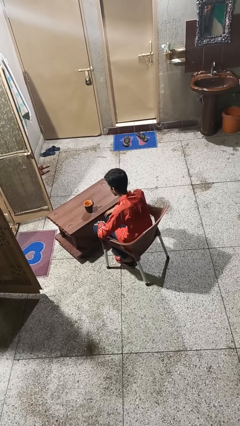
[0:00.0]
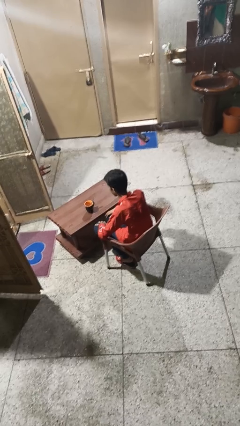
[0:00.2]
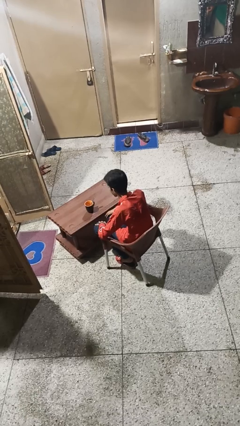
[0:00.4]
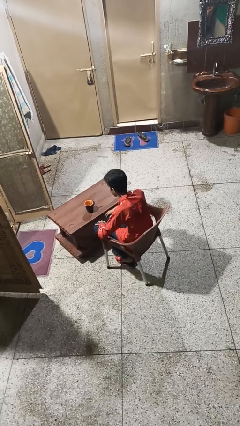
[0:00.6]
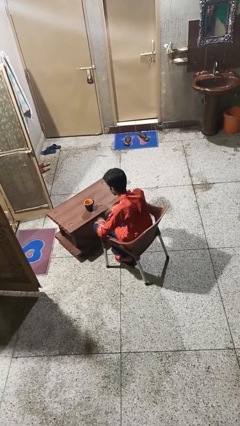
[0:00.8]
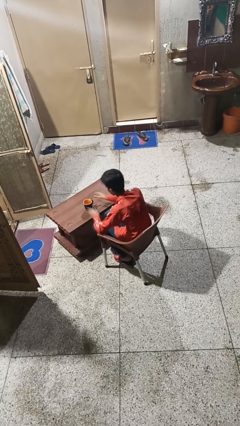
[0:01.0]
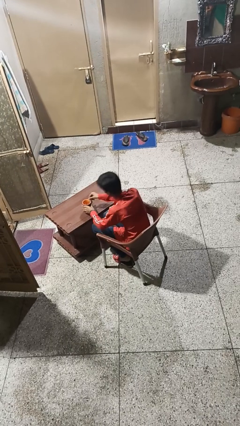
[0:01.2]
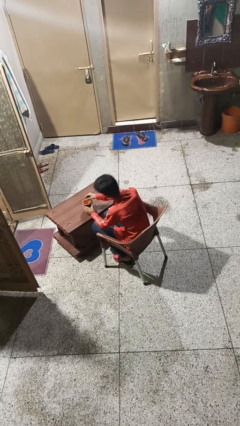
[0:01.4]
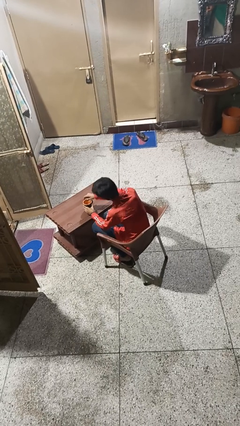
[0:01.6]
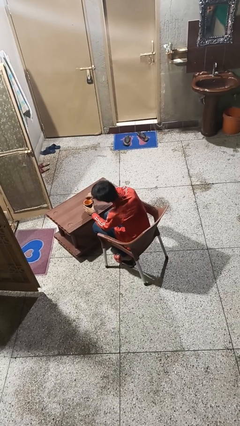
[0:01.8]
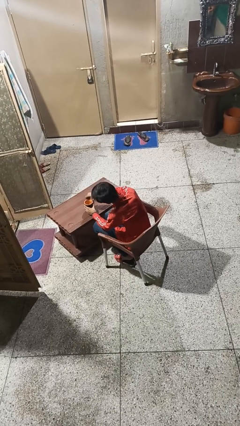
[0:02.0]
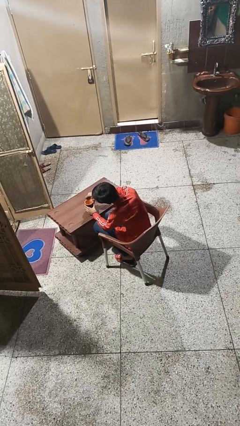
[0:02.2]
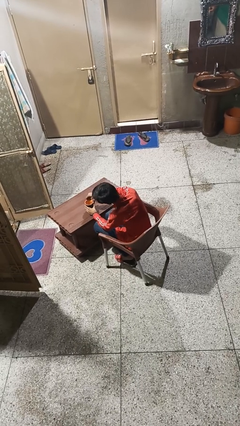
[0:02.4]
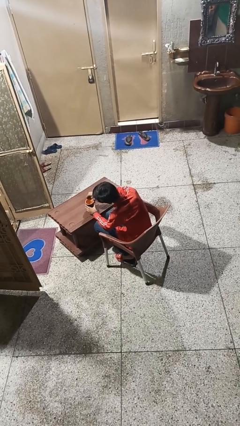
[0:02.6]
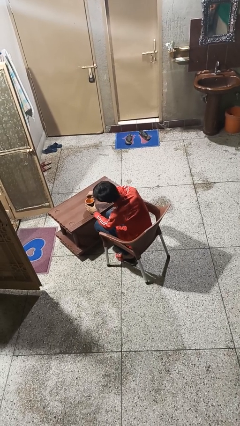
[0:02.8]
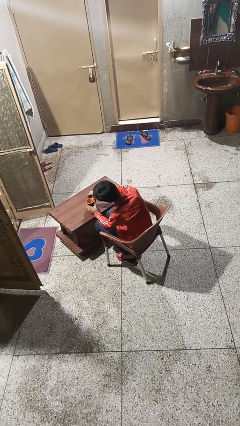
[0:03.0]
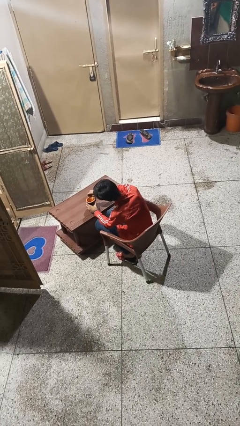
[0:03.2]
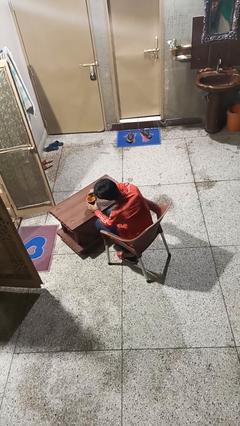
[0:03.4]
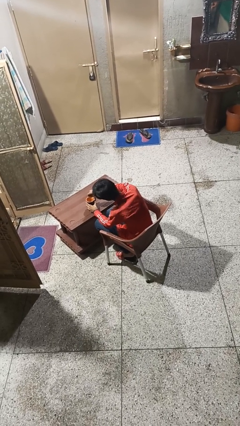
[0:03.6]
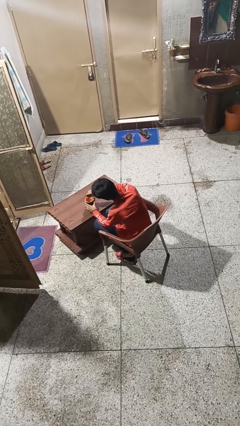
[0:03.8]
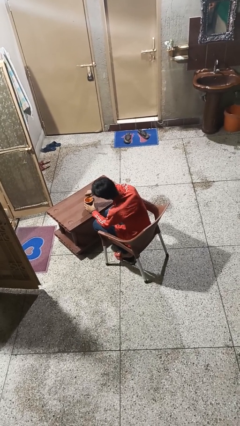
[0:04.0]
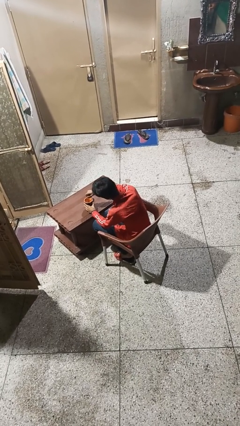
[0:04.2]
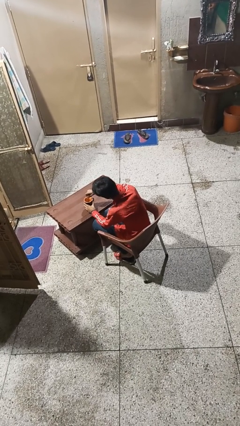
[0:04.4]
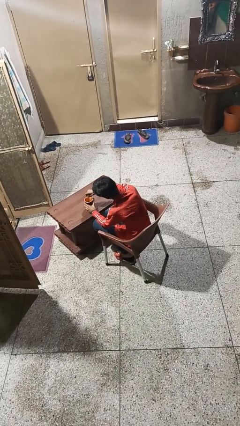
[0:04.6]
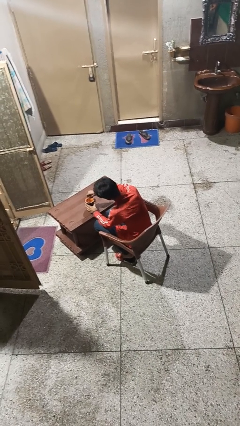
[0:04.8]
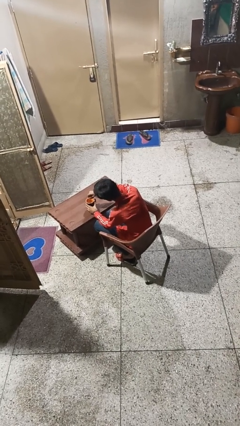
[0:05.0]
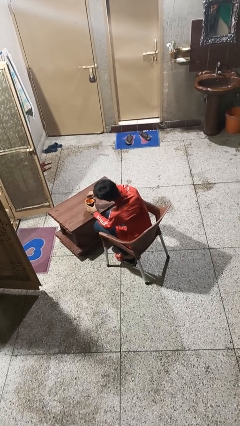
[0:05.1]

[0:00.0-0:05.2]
person stirs mug

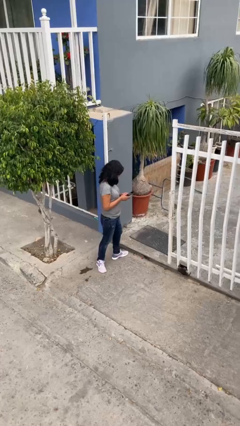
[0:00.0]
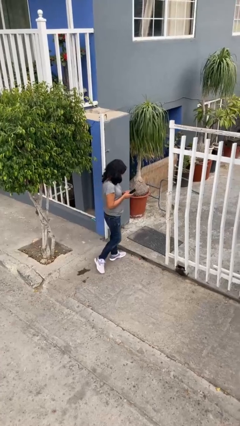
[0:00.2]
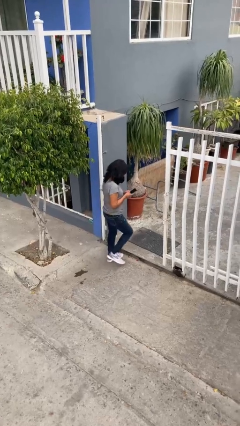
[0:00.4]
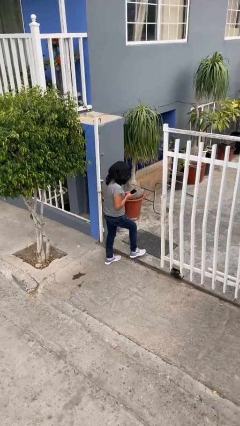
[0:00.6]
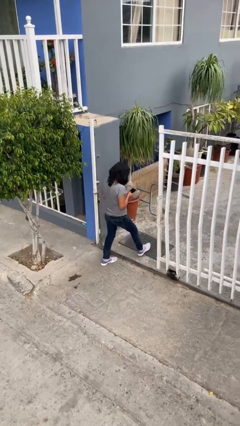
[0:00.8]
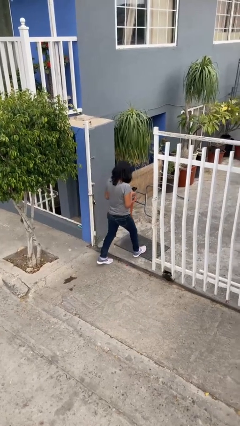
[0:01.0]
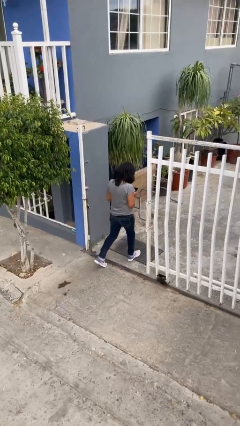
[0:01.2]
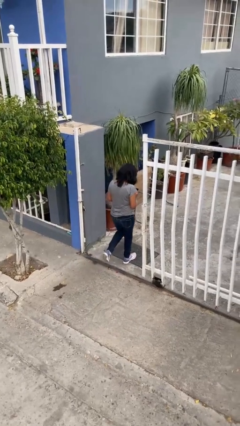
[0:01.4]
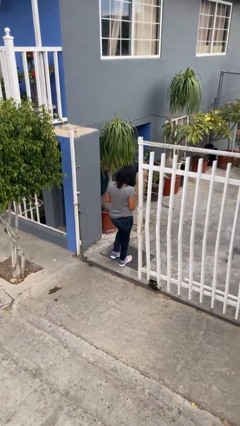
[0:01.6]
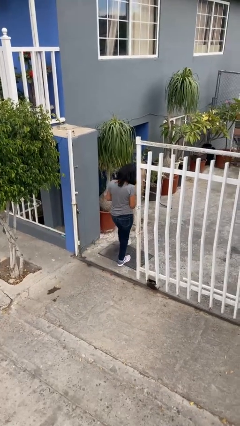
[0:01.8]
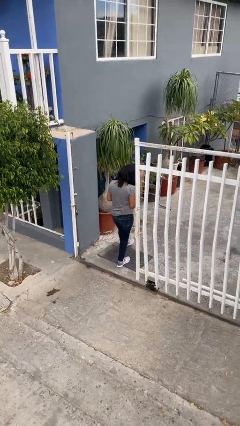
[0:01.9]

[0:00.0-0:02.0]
person exits scene through structure

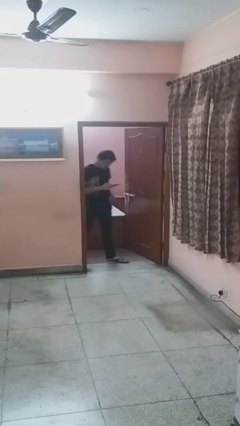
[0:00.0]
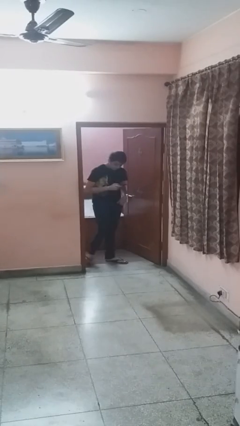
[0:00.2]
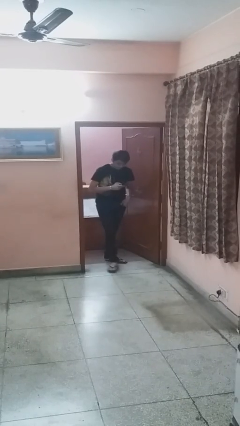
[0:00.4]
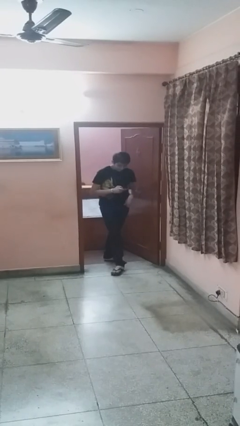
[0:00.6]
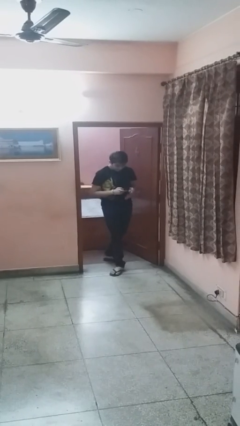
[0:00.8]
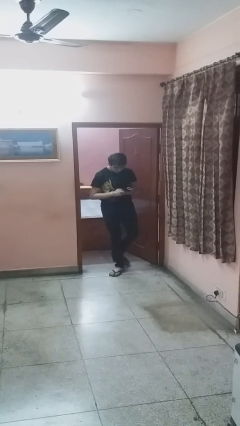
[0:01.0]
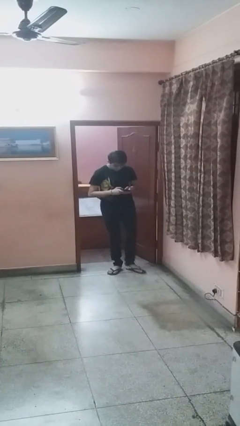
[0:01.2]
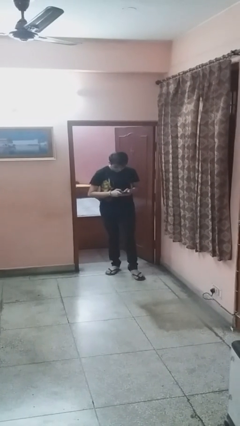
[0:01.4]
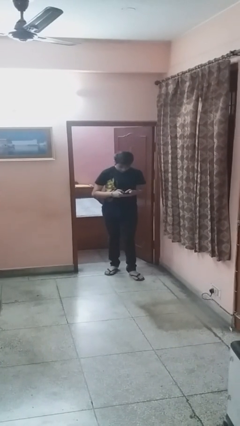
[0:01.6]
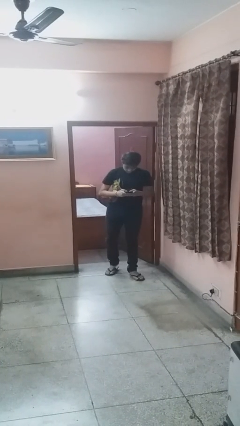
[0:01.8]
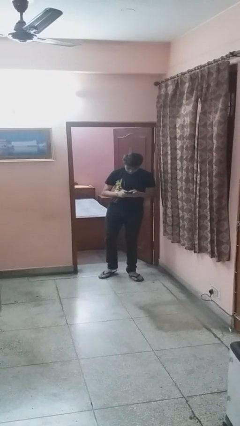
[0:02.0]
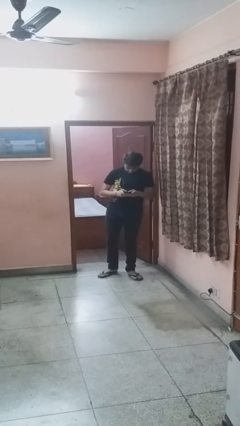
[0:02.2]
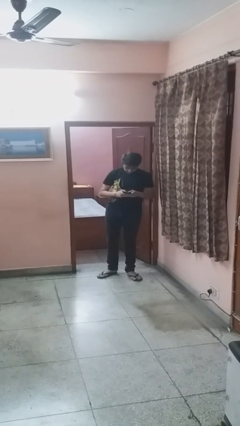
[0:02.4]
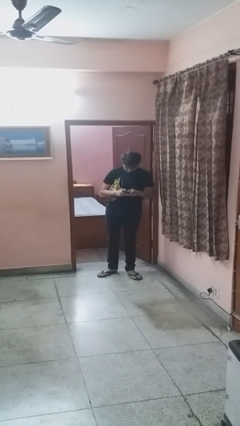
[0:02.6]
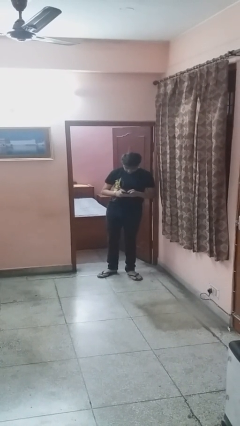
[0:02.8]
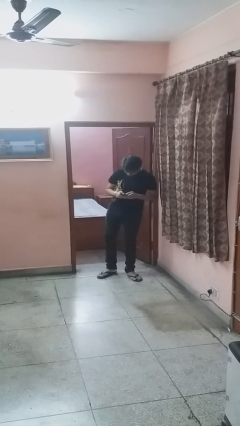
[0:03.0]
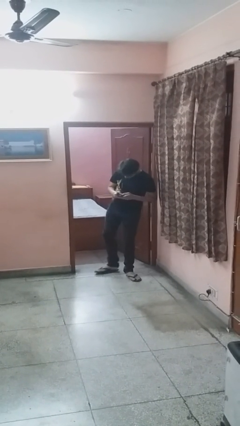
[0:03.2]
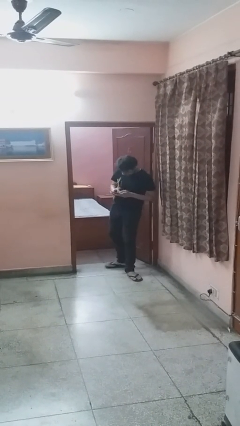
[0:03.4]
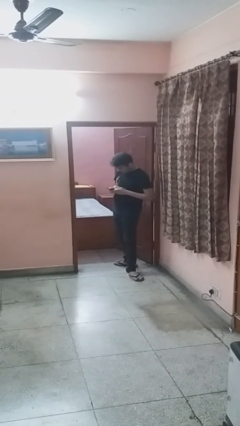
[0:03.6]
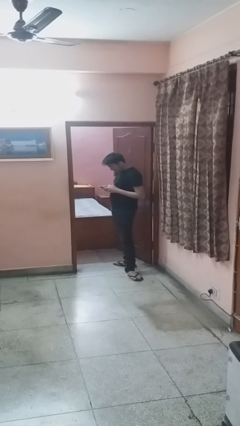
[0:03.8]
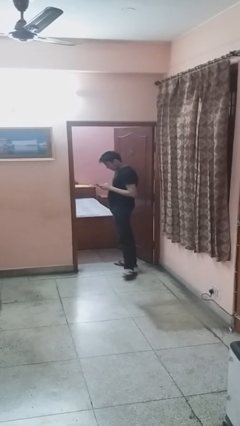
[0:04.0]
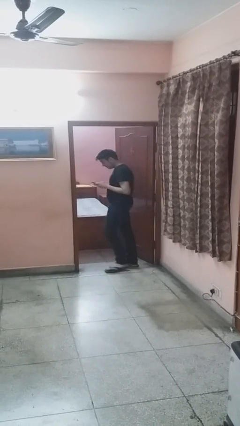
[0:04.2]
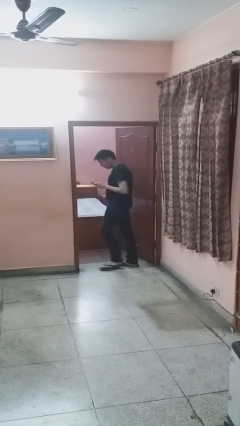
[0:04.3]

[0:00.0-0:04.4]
person enters scene through structure

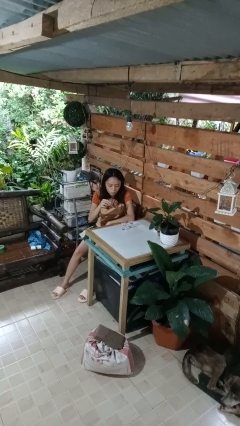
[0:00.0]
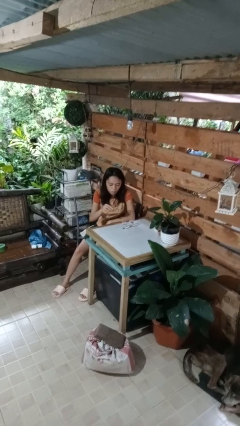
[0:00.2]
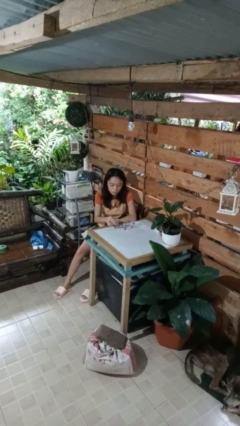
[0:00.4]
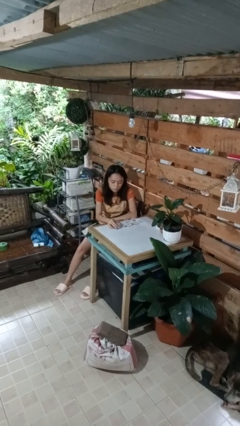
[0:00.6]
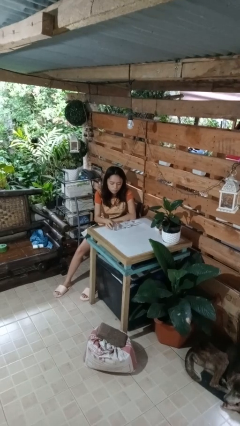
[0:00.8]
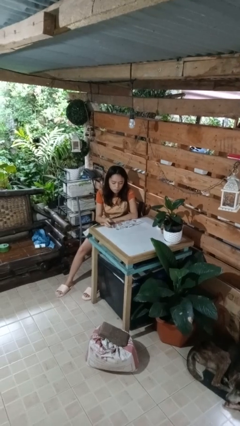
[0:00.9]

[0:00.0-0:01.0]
person puts down object on table

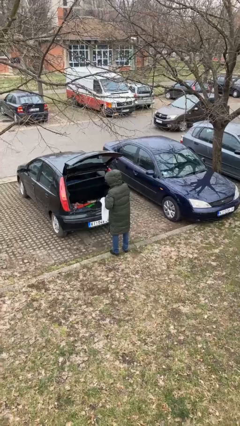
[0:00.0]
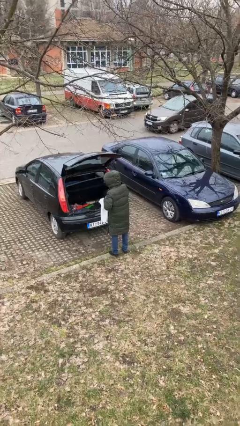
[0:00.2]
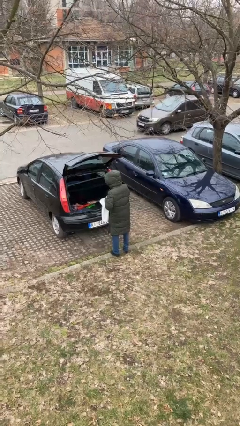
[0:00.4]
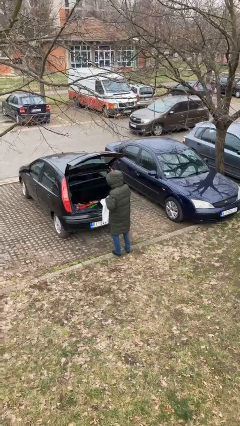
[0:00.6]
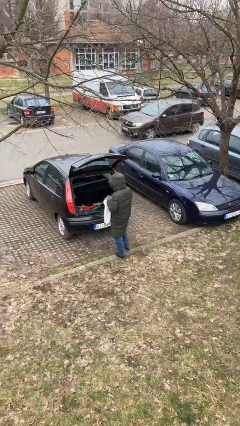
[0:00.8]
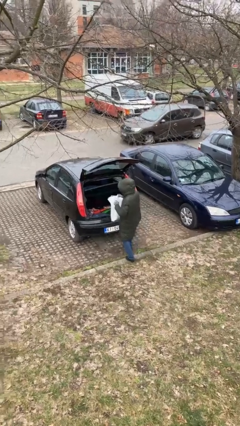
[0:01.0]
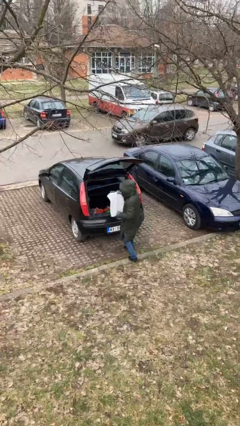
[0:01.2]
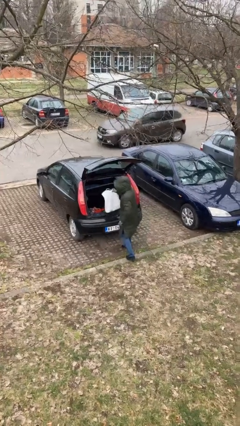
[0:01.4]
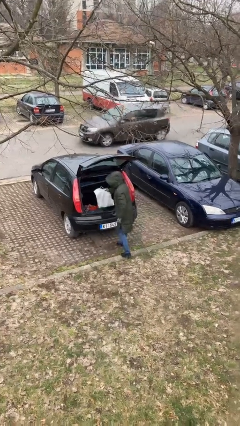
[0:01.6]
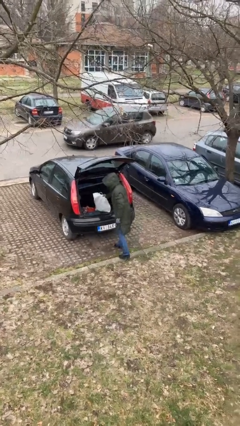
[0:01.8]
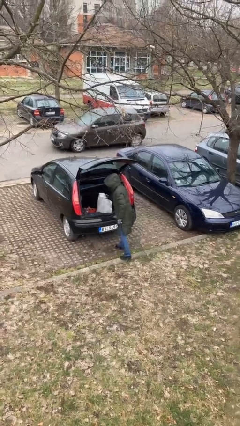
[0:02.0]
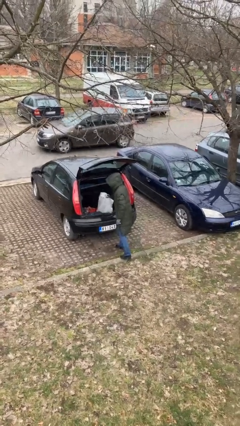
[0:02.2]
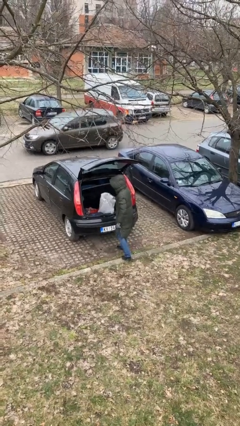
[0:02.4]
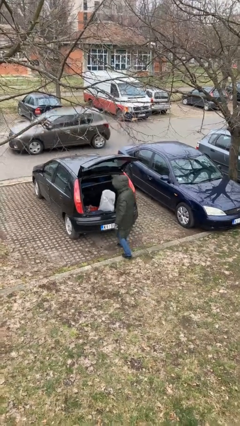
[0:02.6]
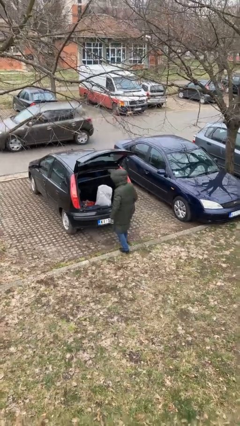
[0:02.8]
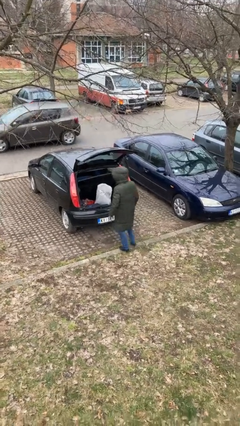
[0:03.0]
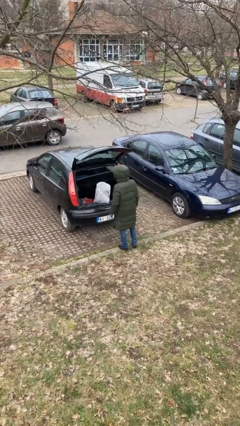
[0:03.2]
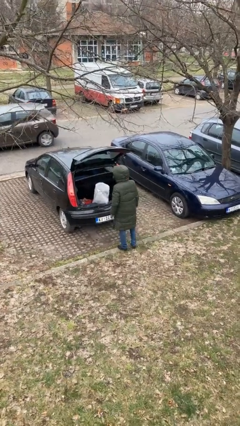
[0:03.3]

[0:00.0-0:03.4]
person loads car

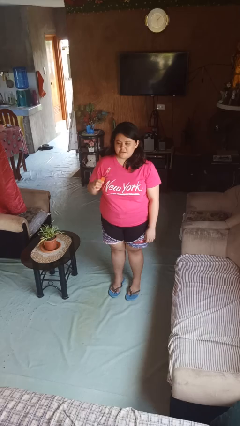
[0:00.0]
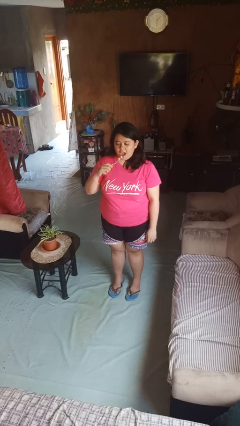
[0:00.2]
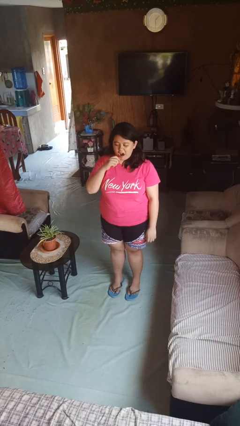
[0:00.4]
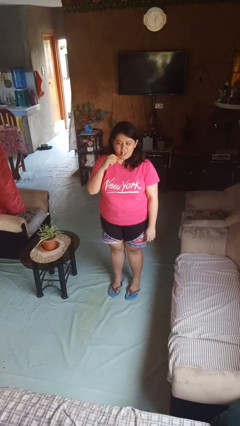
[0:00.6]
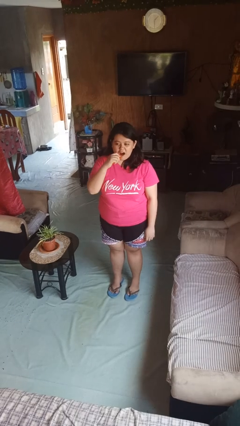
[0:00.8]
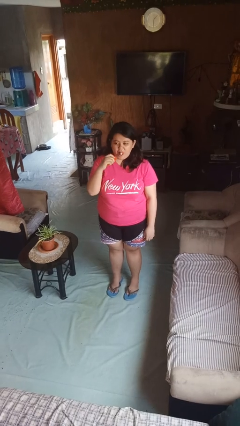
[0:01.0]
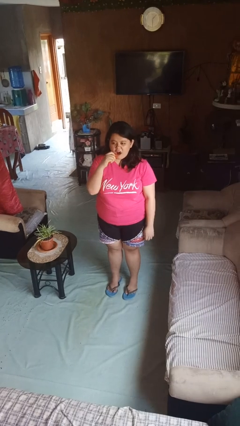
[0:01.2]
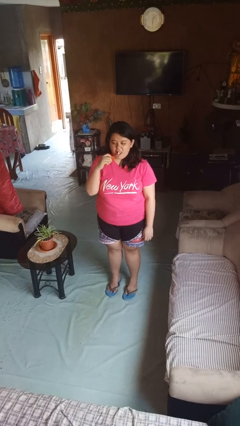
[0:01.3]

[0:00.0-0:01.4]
person brushes teeth
